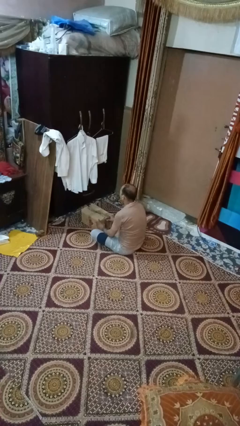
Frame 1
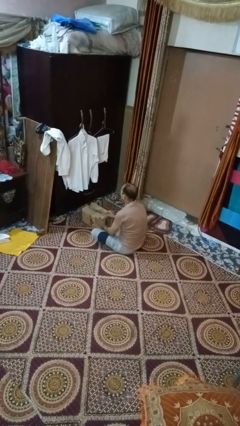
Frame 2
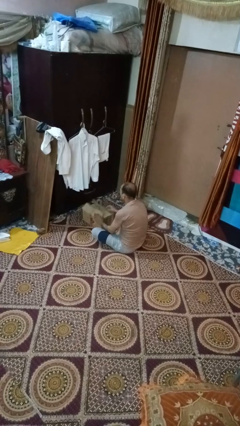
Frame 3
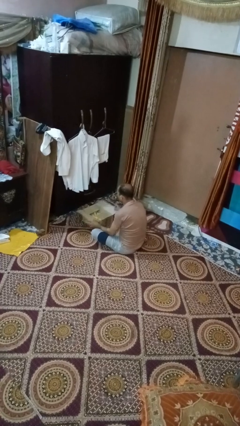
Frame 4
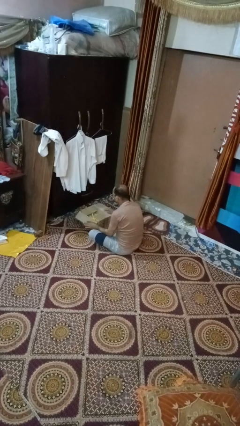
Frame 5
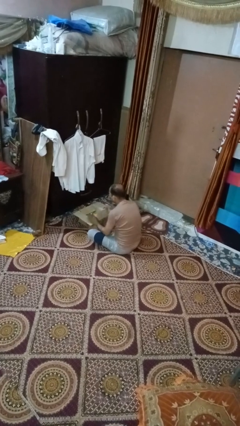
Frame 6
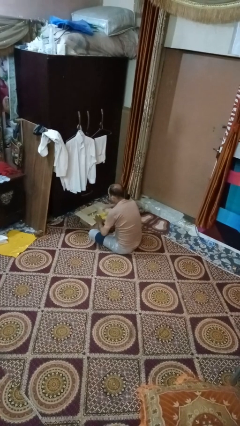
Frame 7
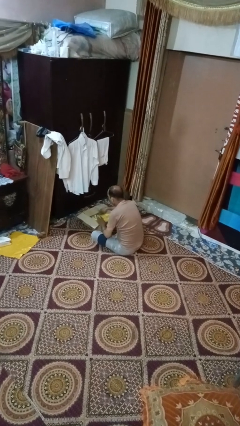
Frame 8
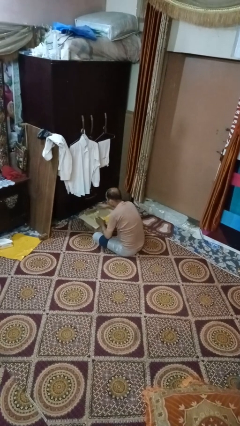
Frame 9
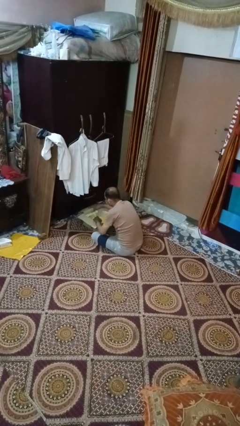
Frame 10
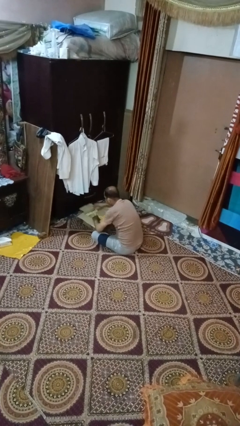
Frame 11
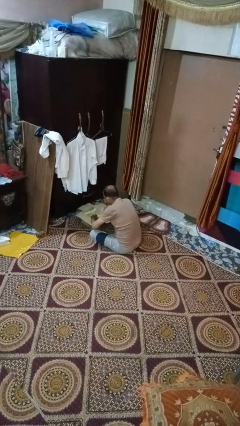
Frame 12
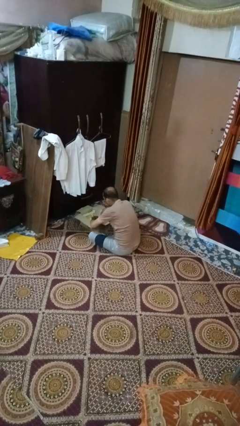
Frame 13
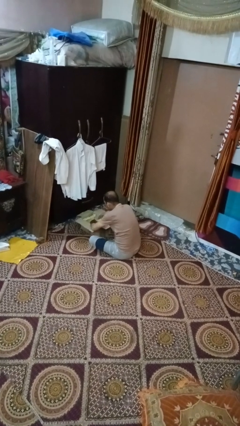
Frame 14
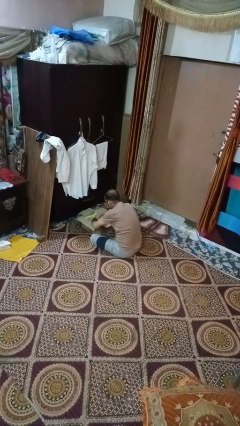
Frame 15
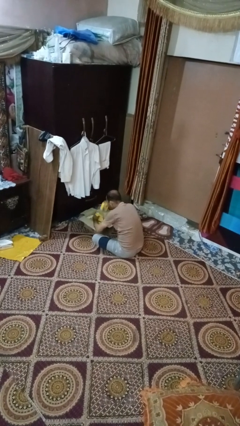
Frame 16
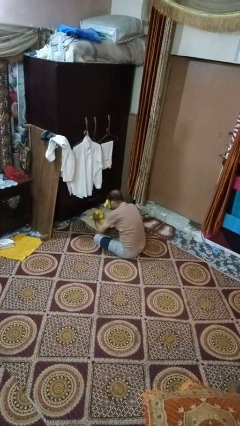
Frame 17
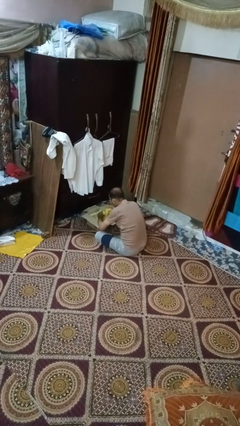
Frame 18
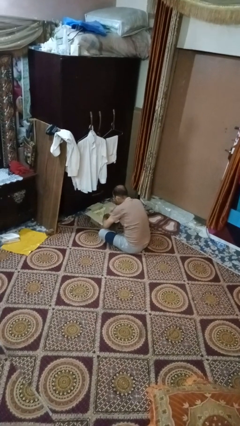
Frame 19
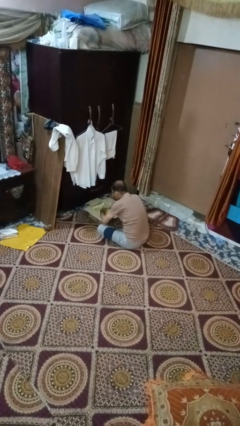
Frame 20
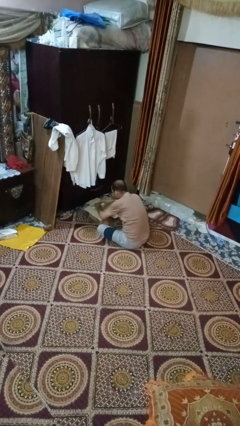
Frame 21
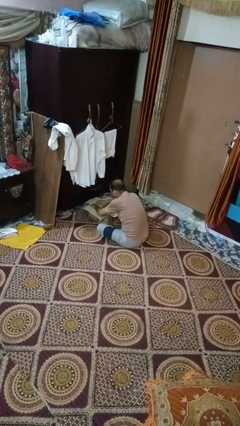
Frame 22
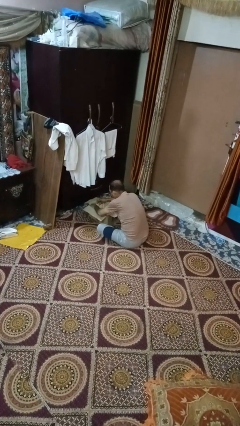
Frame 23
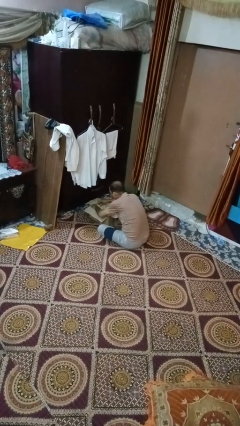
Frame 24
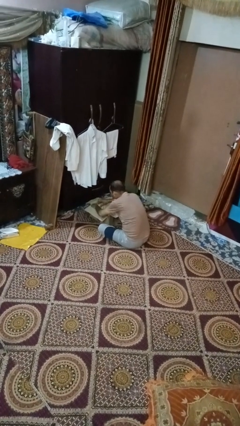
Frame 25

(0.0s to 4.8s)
person searches in box

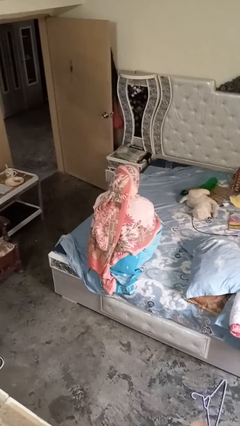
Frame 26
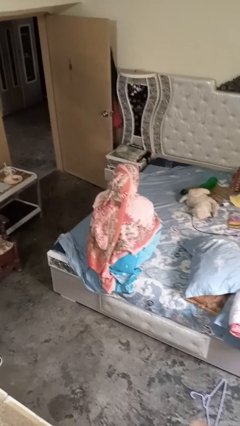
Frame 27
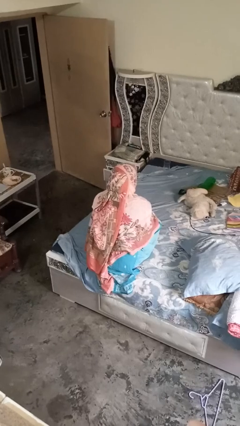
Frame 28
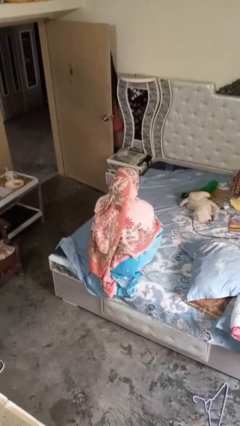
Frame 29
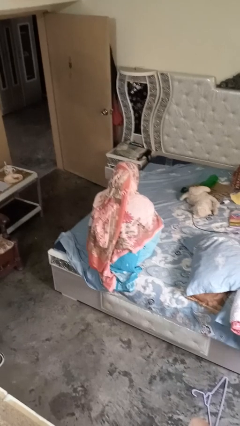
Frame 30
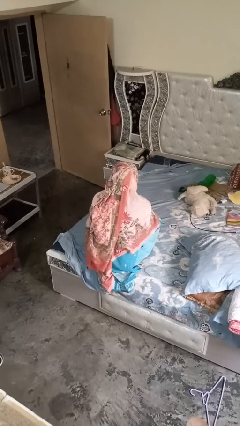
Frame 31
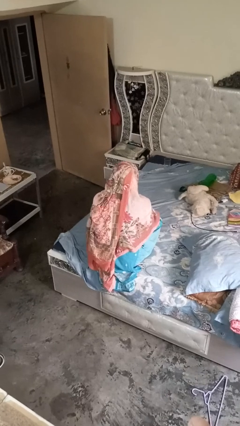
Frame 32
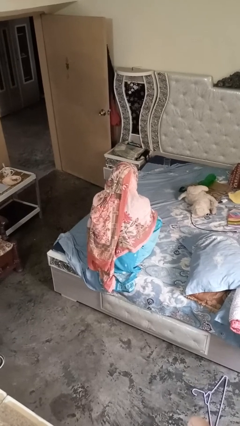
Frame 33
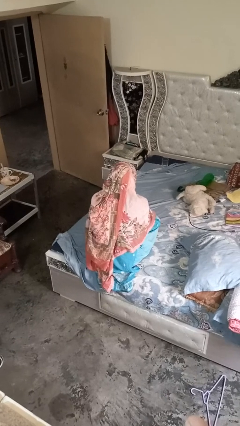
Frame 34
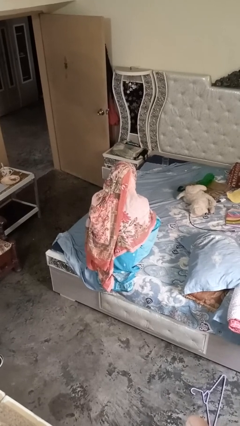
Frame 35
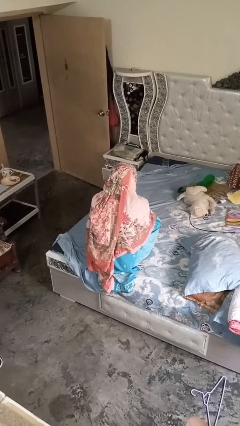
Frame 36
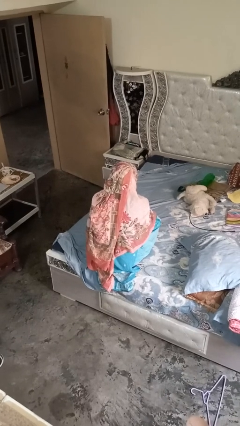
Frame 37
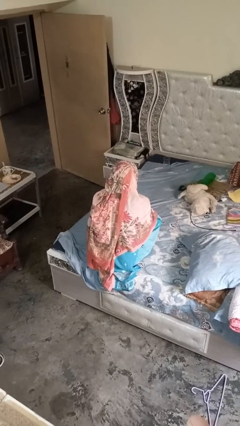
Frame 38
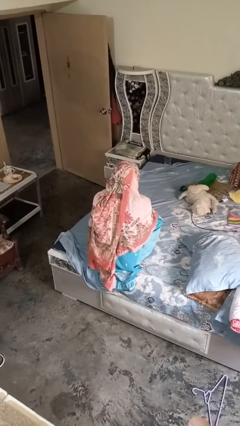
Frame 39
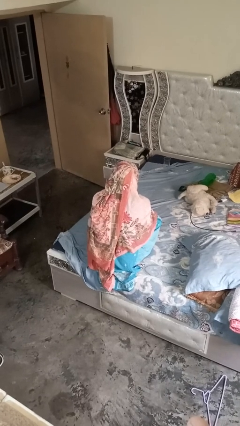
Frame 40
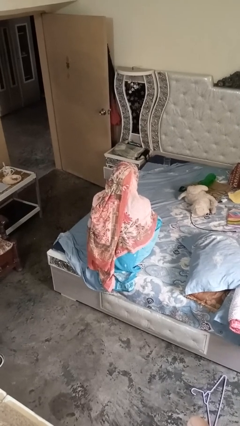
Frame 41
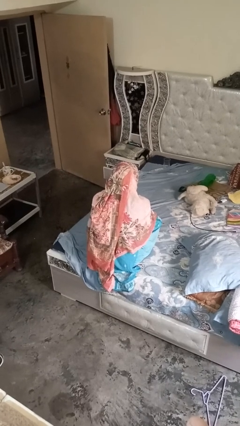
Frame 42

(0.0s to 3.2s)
person rubs foot

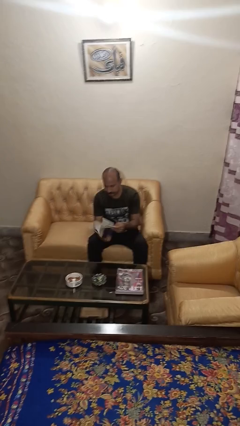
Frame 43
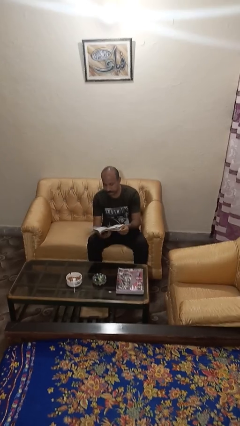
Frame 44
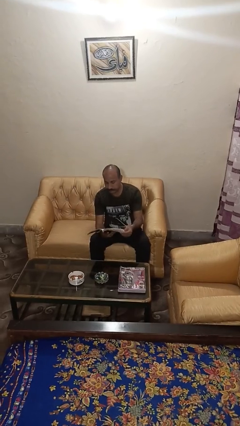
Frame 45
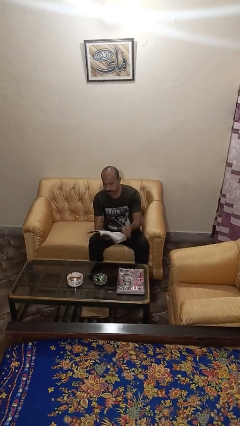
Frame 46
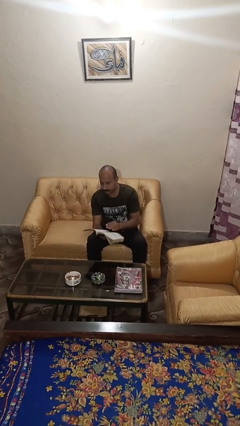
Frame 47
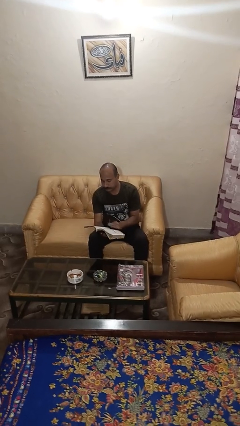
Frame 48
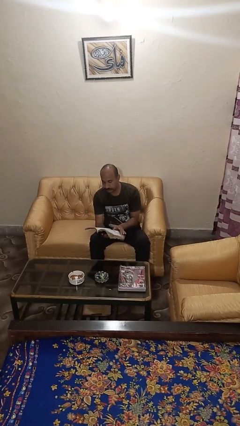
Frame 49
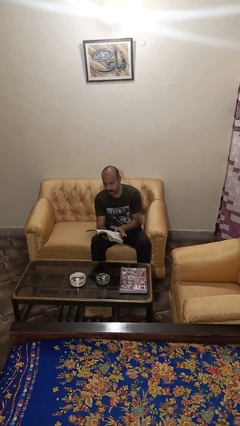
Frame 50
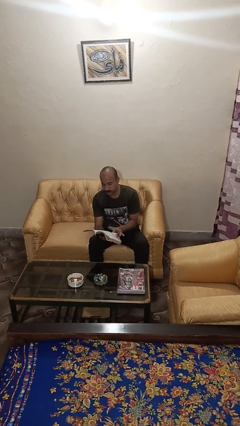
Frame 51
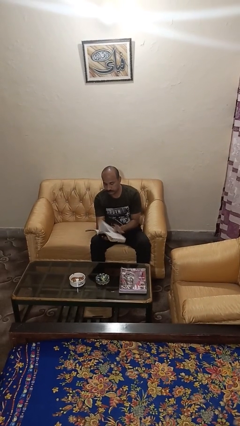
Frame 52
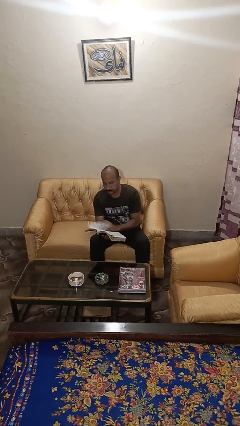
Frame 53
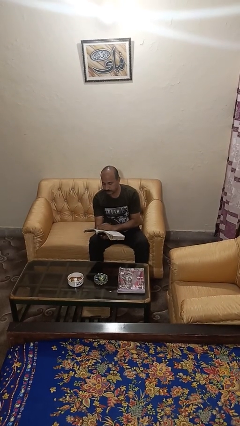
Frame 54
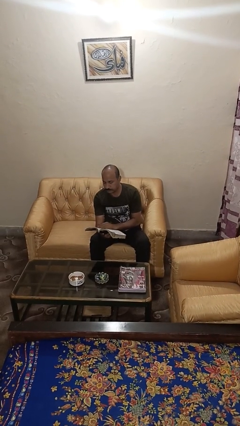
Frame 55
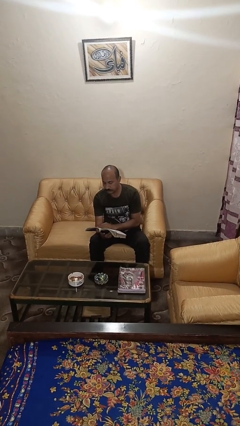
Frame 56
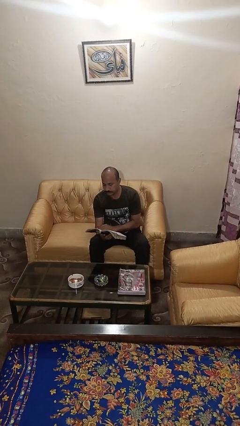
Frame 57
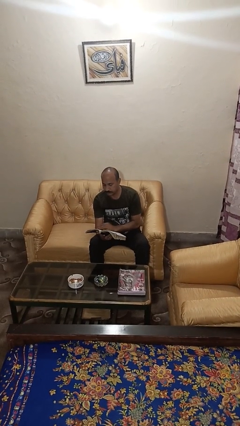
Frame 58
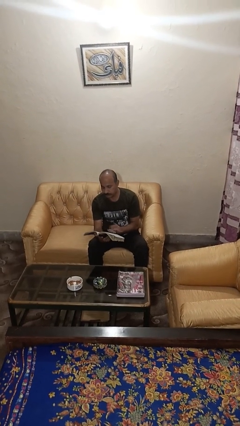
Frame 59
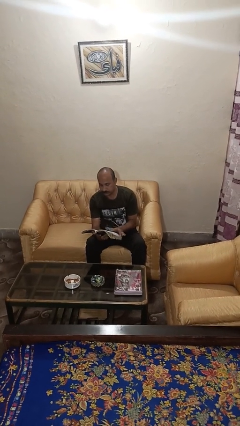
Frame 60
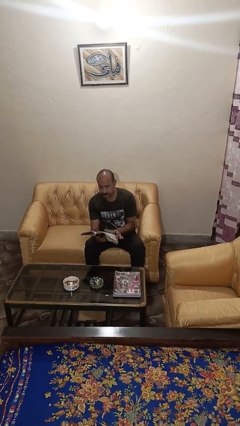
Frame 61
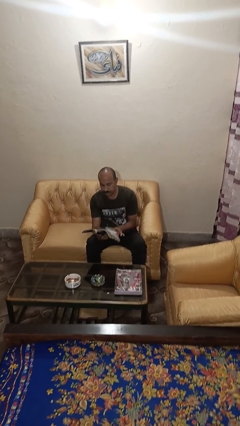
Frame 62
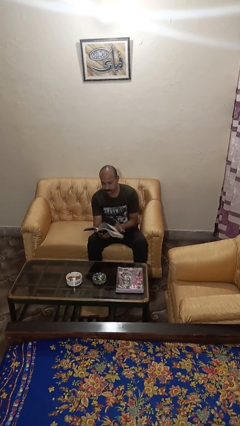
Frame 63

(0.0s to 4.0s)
person reads book

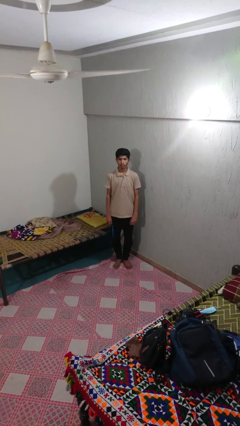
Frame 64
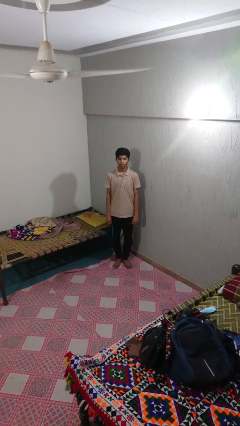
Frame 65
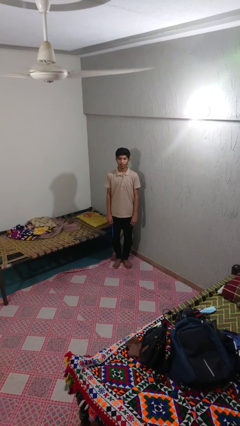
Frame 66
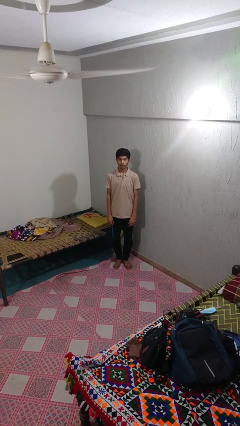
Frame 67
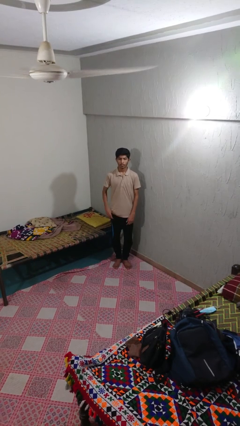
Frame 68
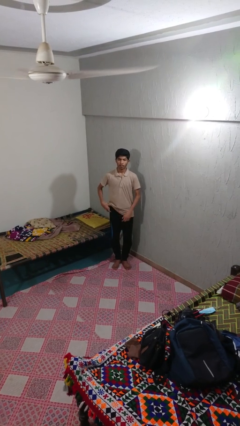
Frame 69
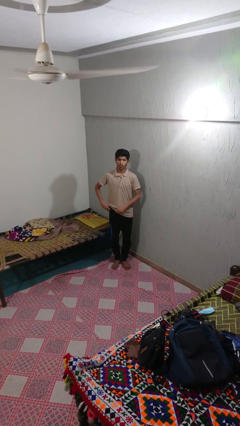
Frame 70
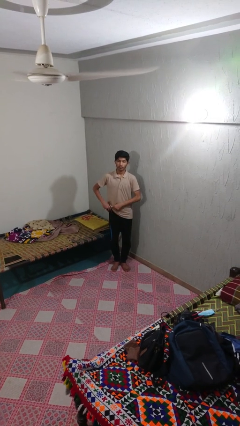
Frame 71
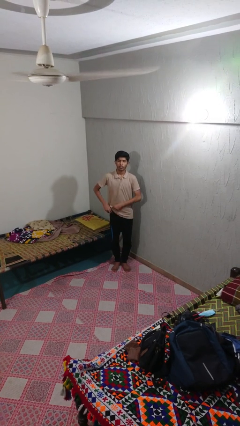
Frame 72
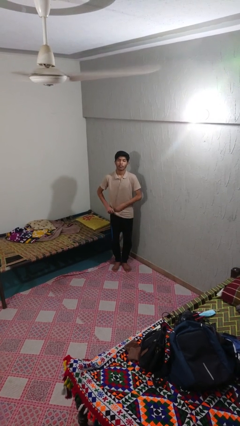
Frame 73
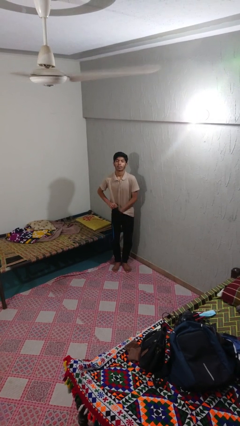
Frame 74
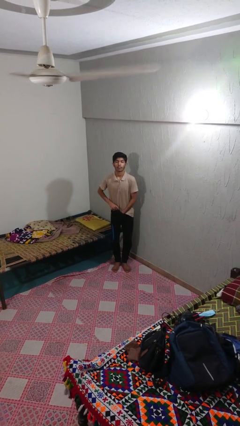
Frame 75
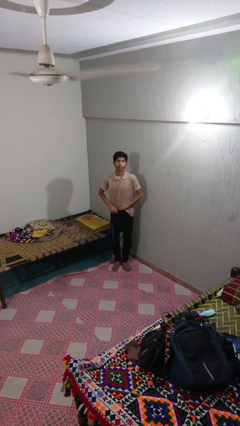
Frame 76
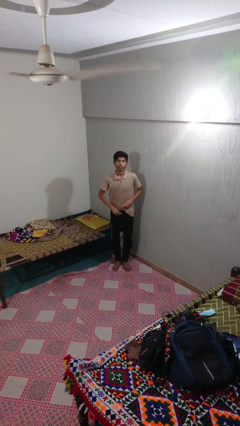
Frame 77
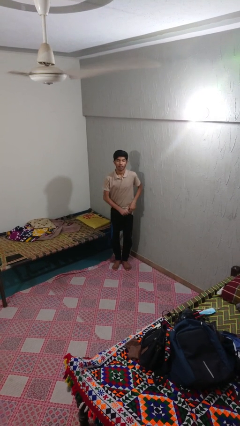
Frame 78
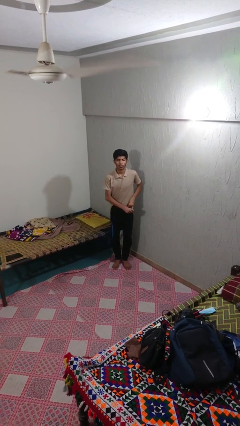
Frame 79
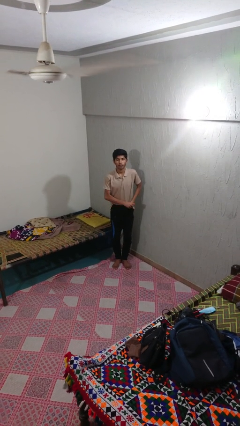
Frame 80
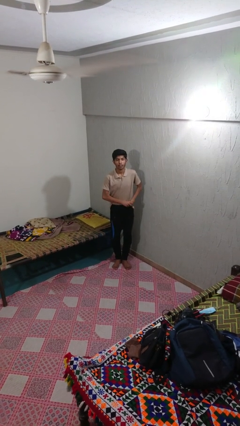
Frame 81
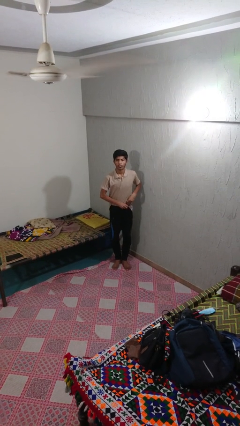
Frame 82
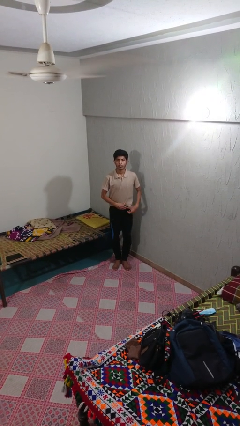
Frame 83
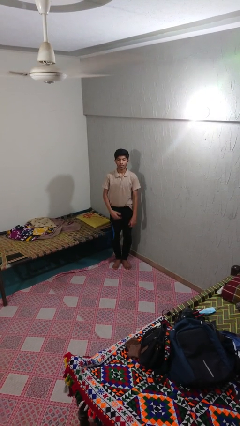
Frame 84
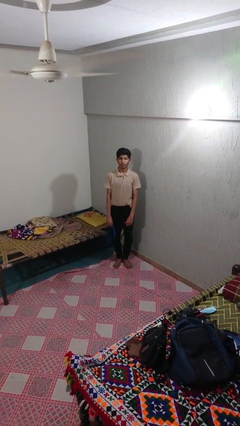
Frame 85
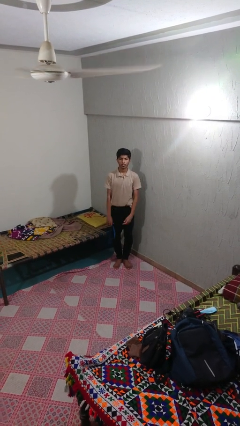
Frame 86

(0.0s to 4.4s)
person tucks in shirt

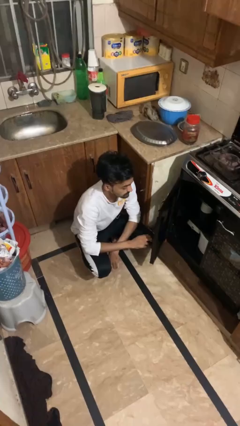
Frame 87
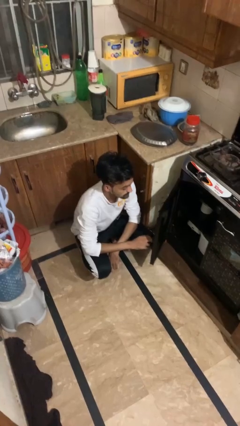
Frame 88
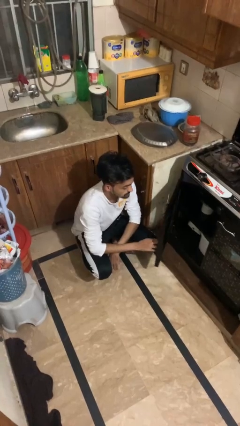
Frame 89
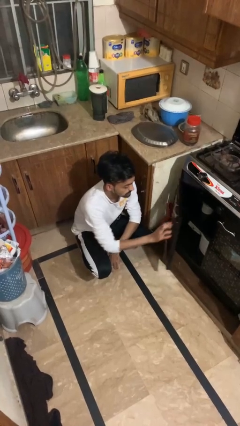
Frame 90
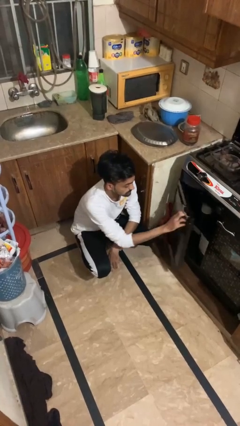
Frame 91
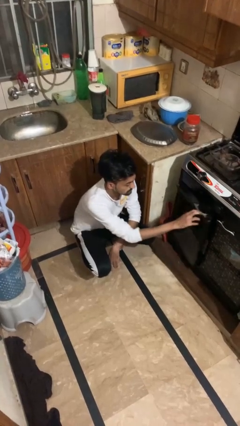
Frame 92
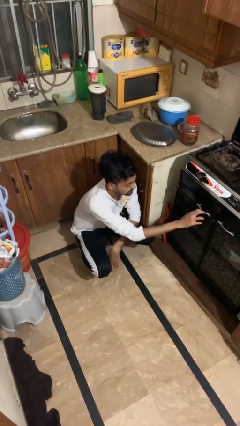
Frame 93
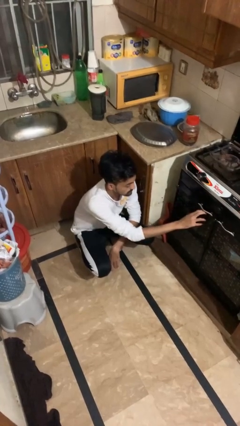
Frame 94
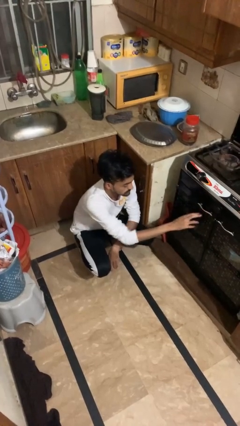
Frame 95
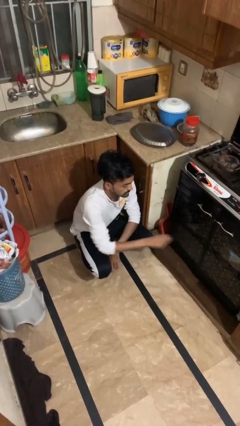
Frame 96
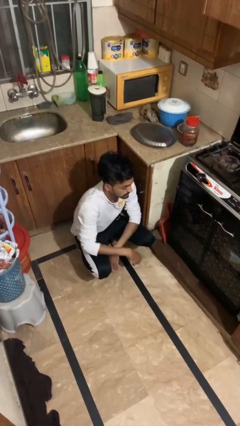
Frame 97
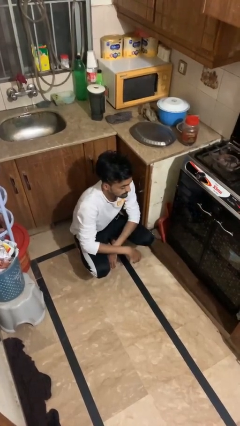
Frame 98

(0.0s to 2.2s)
person closes oven door
